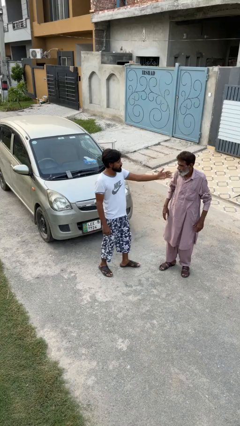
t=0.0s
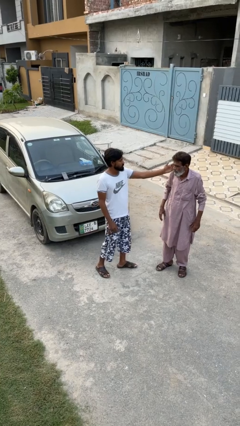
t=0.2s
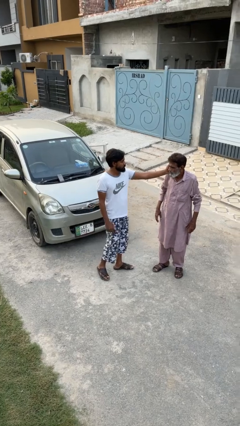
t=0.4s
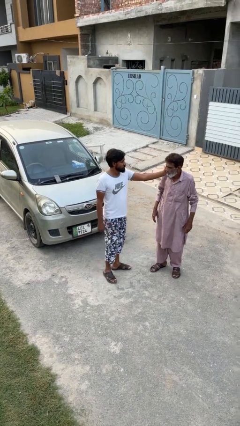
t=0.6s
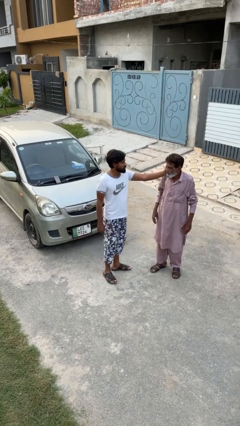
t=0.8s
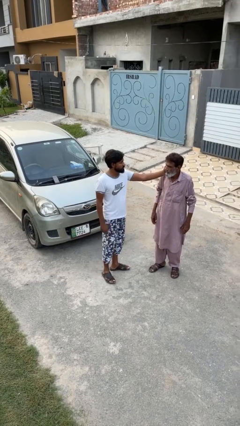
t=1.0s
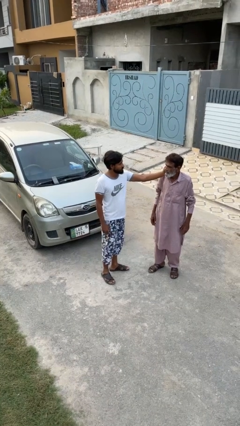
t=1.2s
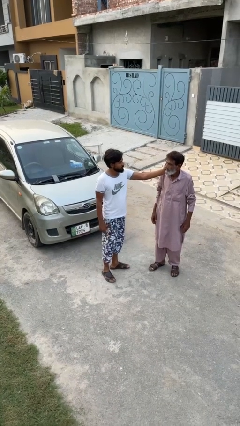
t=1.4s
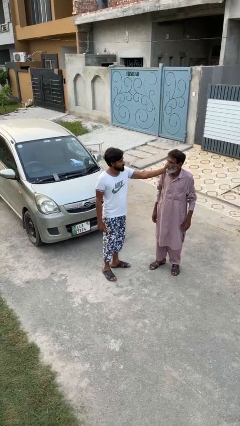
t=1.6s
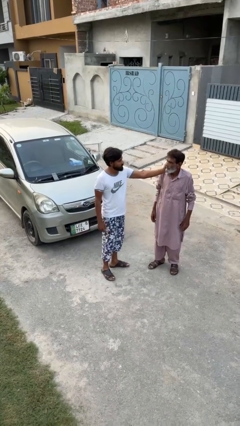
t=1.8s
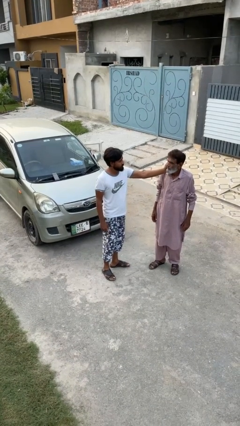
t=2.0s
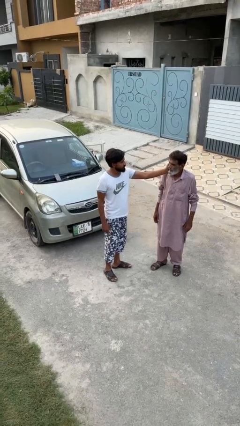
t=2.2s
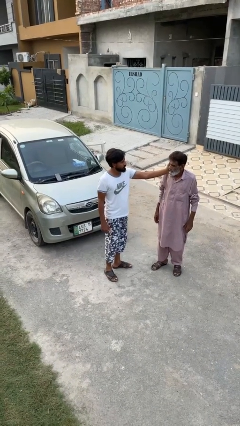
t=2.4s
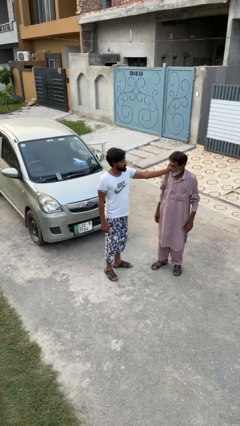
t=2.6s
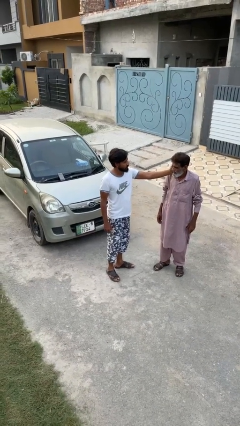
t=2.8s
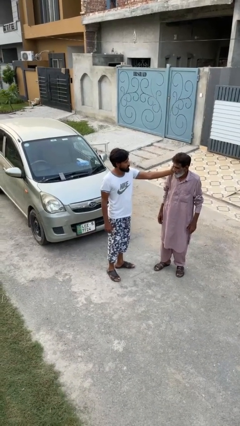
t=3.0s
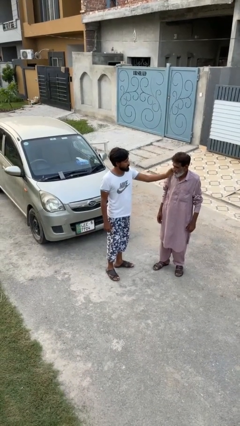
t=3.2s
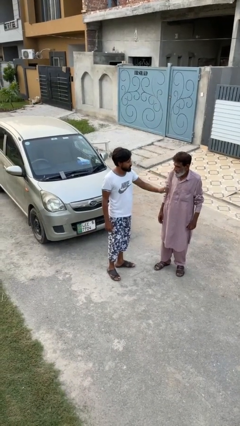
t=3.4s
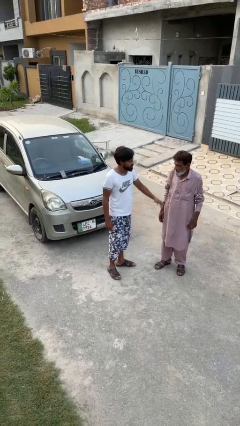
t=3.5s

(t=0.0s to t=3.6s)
person touches face of person

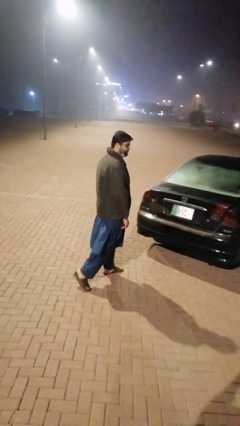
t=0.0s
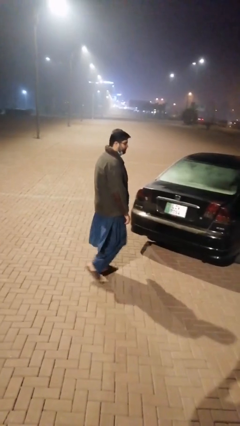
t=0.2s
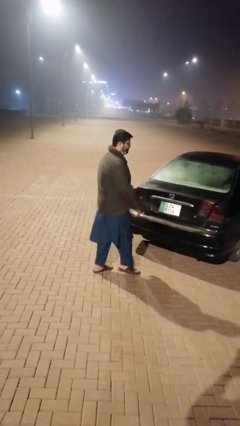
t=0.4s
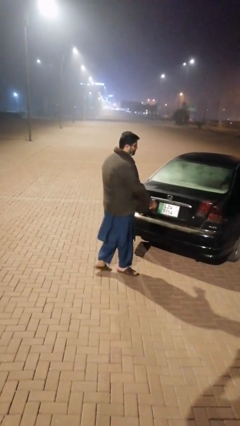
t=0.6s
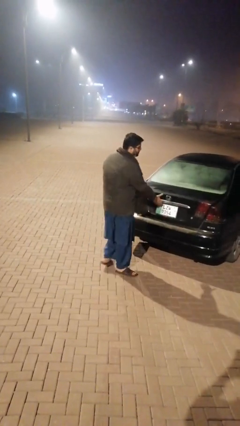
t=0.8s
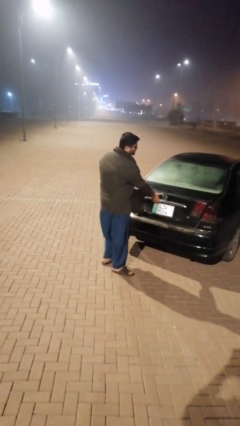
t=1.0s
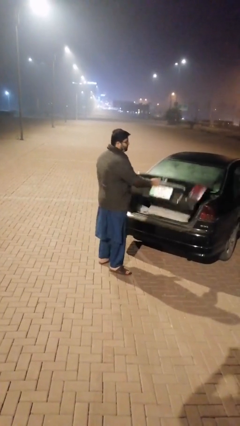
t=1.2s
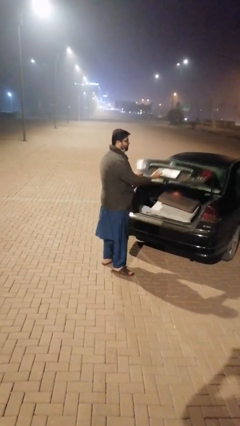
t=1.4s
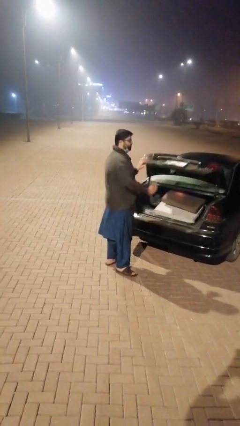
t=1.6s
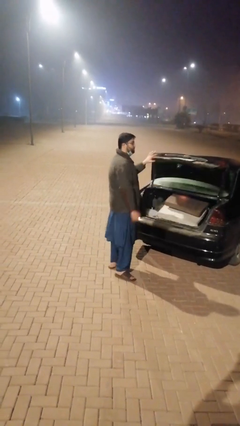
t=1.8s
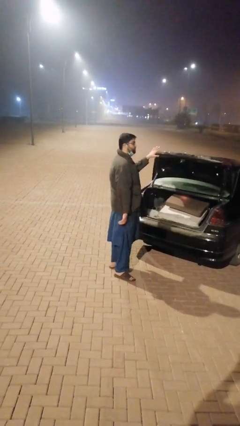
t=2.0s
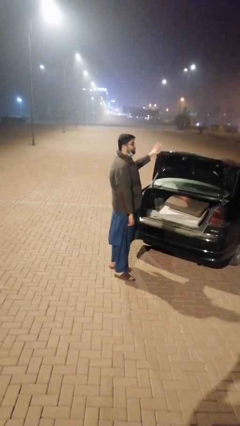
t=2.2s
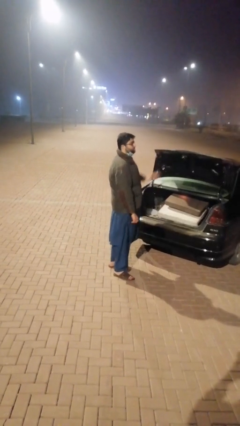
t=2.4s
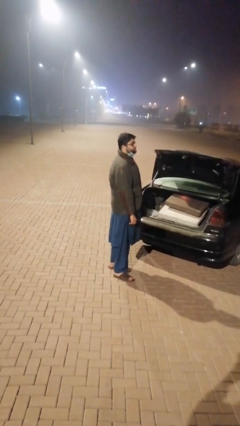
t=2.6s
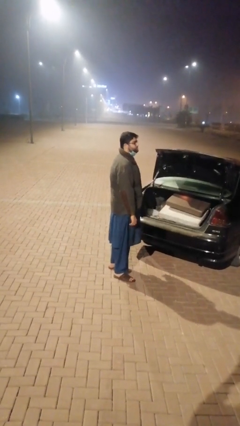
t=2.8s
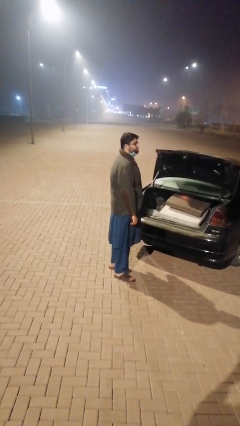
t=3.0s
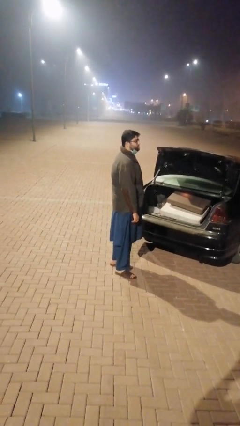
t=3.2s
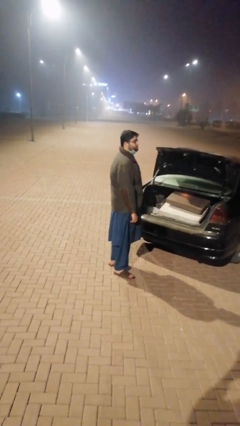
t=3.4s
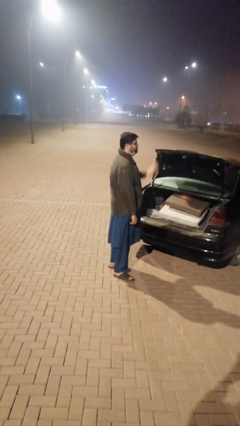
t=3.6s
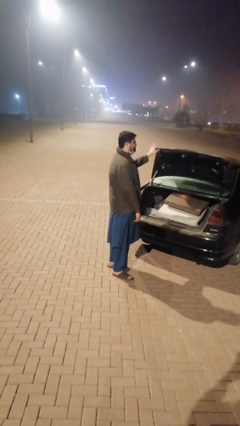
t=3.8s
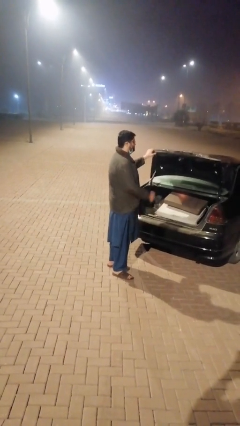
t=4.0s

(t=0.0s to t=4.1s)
person opens car trunk

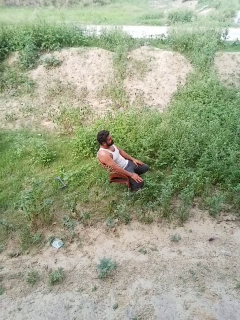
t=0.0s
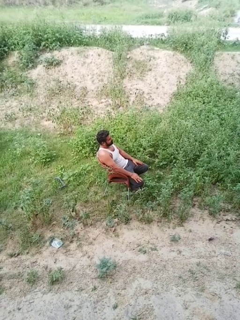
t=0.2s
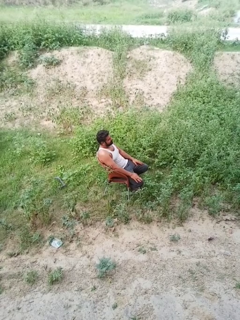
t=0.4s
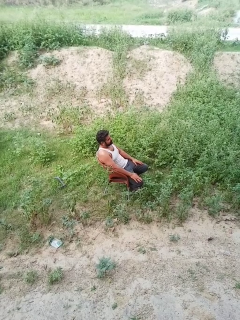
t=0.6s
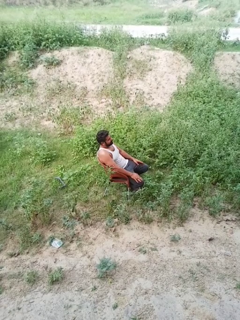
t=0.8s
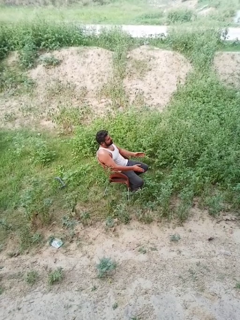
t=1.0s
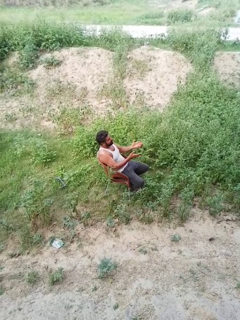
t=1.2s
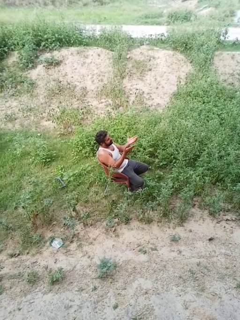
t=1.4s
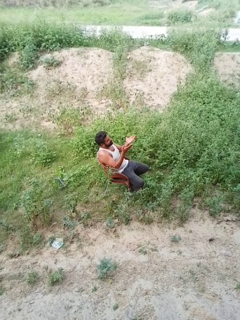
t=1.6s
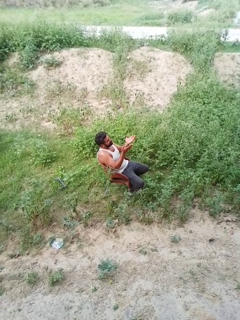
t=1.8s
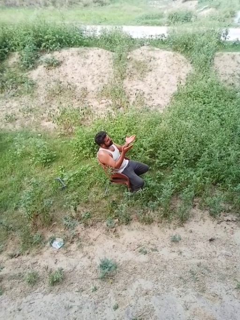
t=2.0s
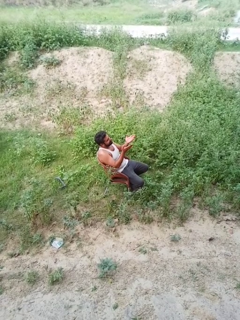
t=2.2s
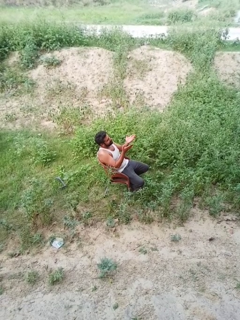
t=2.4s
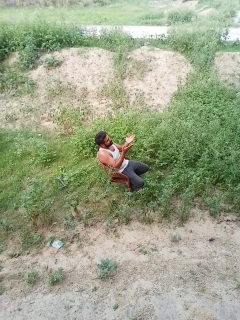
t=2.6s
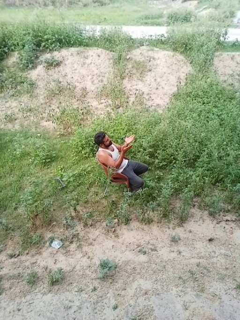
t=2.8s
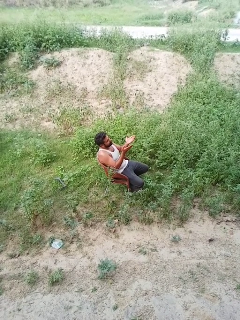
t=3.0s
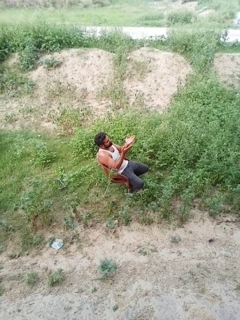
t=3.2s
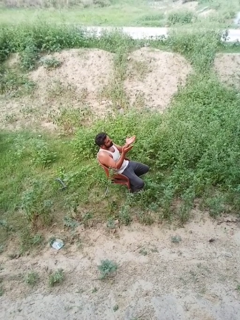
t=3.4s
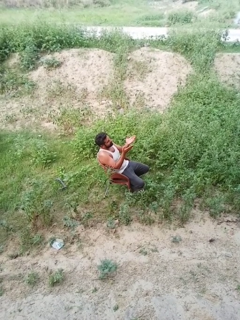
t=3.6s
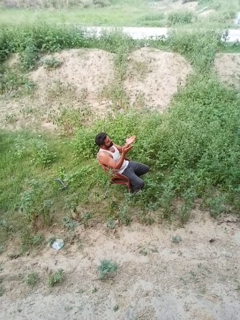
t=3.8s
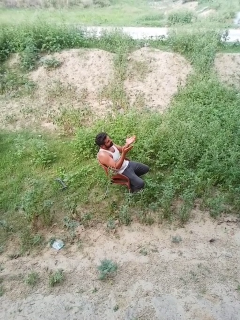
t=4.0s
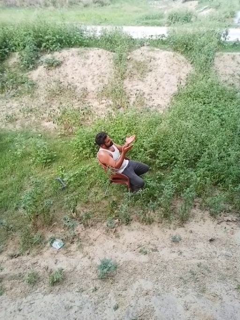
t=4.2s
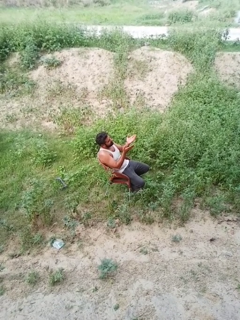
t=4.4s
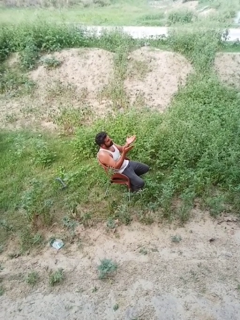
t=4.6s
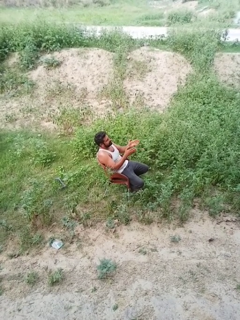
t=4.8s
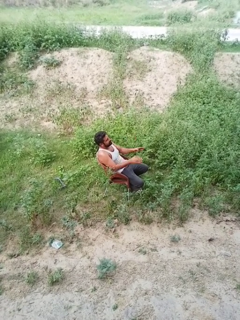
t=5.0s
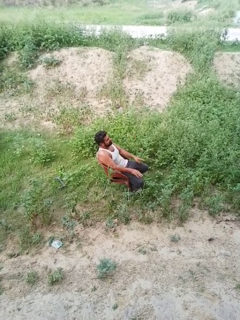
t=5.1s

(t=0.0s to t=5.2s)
person prays

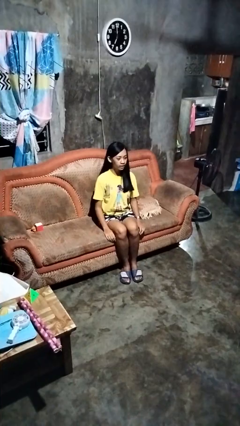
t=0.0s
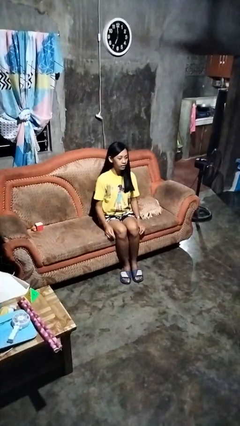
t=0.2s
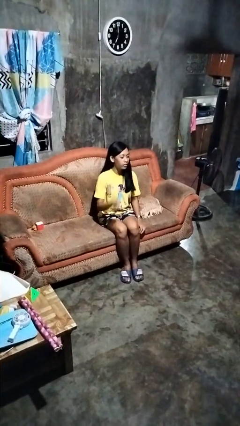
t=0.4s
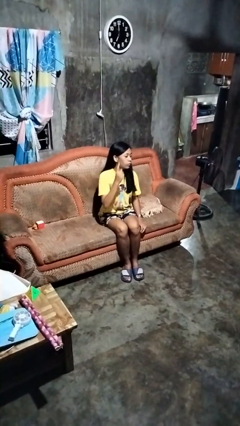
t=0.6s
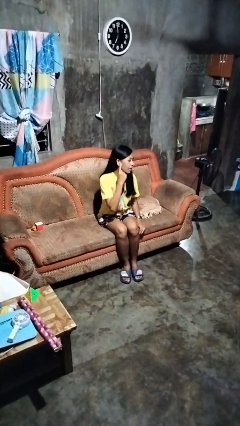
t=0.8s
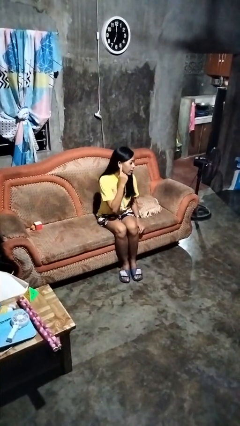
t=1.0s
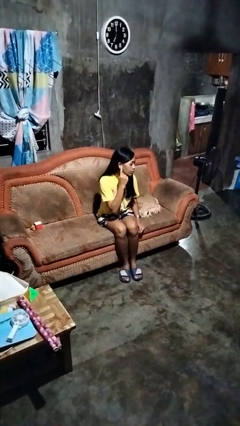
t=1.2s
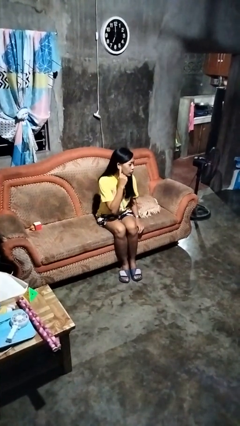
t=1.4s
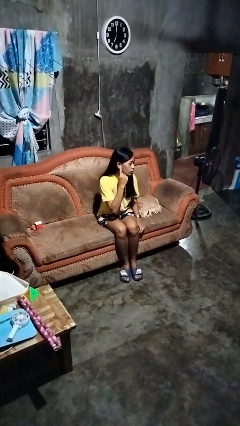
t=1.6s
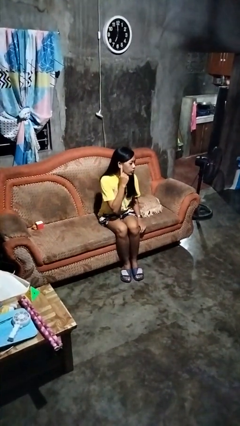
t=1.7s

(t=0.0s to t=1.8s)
person gestures listen closely

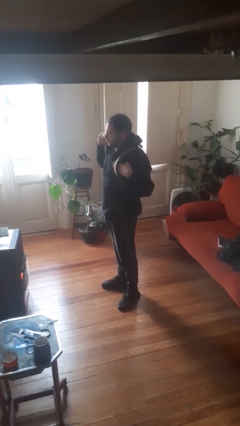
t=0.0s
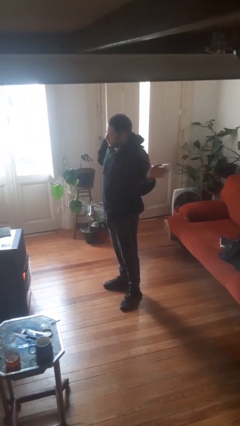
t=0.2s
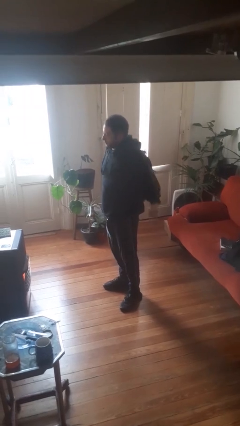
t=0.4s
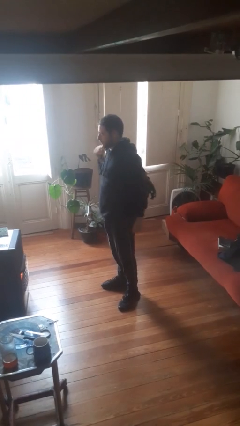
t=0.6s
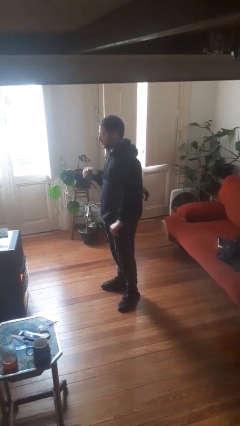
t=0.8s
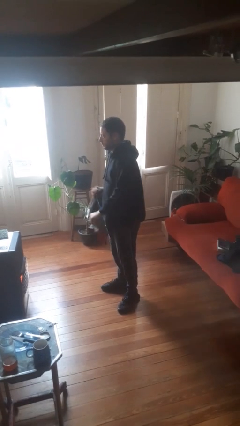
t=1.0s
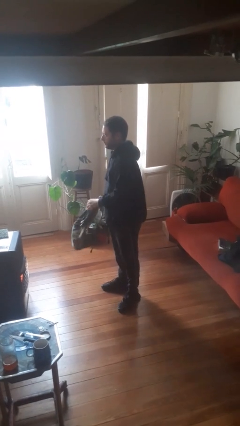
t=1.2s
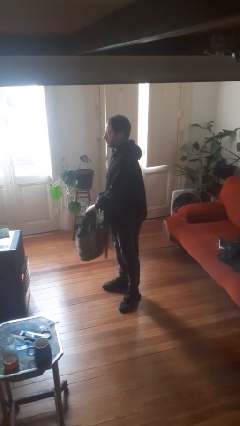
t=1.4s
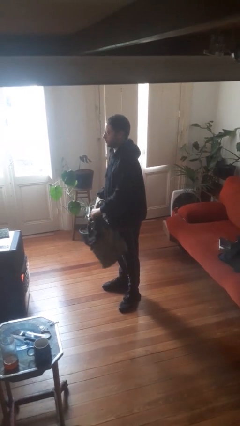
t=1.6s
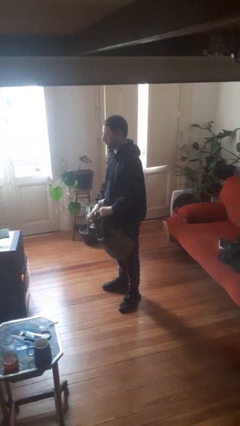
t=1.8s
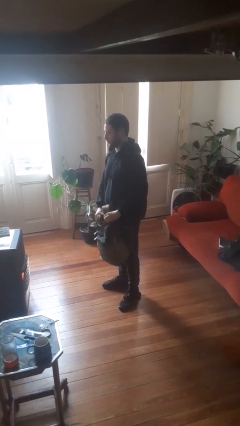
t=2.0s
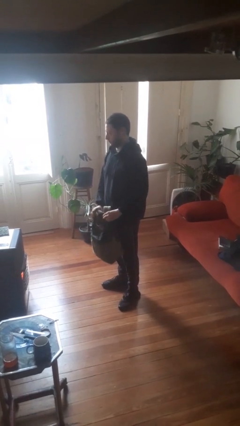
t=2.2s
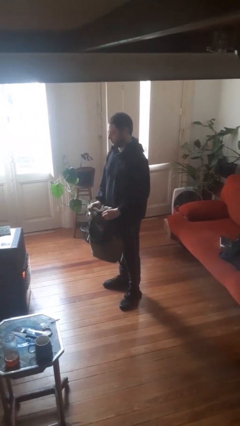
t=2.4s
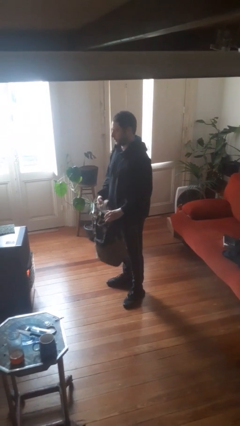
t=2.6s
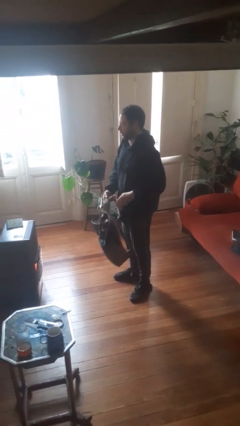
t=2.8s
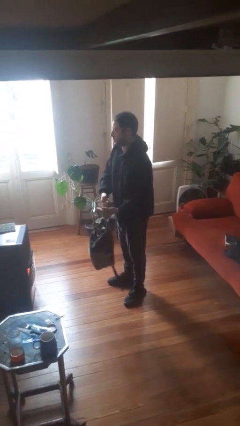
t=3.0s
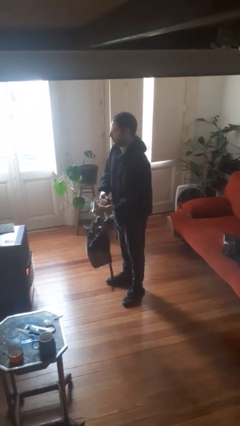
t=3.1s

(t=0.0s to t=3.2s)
person takes off backpack

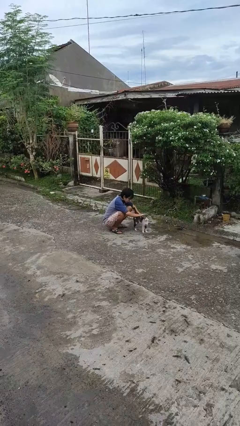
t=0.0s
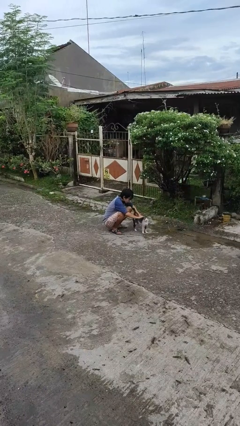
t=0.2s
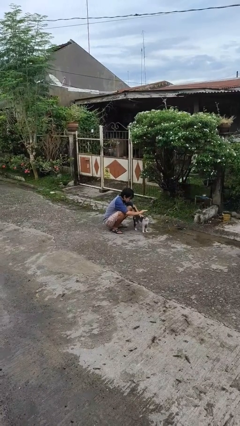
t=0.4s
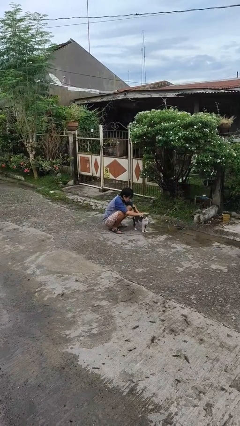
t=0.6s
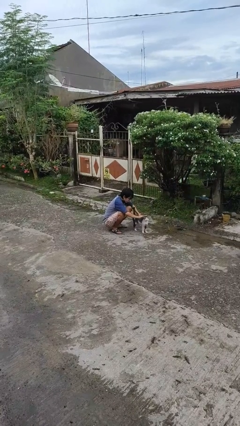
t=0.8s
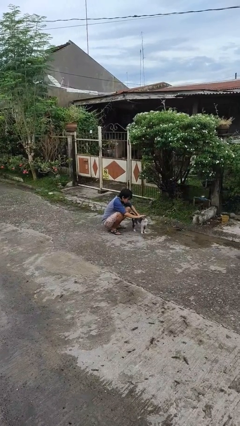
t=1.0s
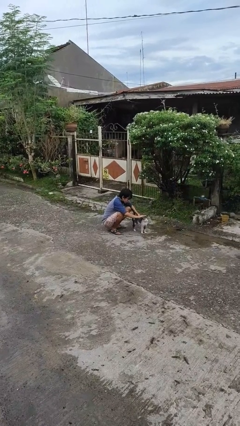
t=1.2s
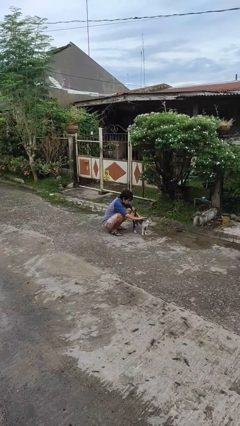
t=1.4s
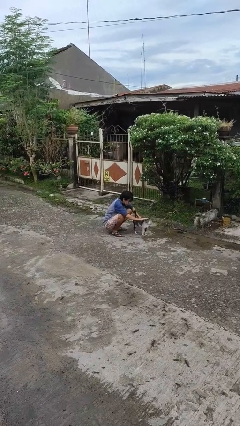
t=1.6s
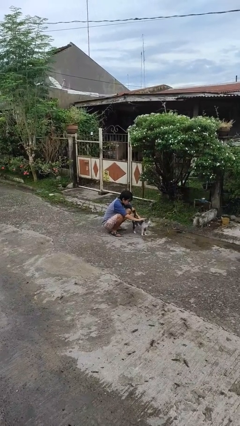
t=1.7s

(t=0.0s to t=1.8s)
person pets cat
